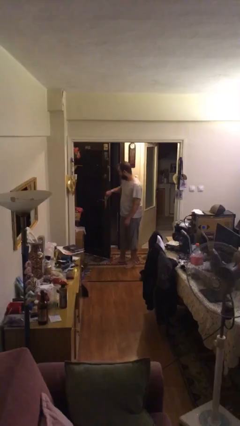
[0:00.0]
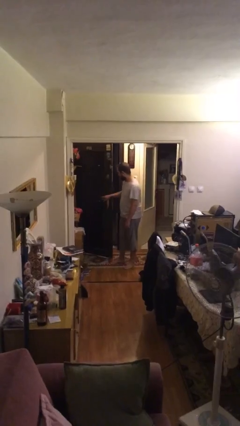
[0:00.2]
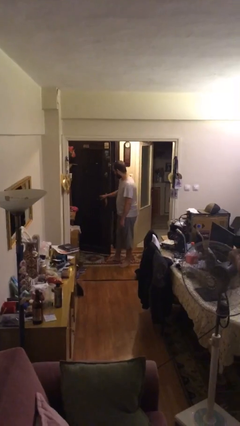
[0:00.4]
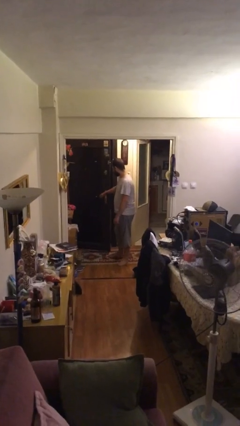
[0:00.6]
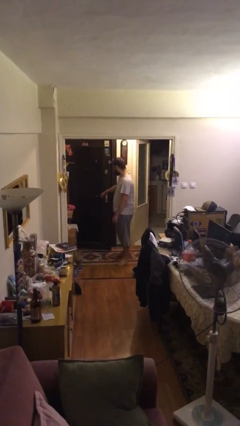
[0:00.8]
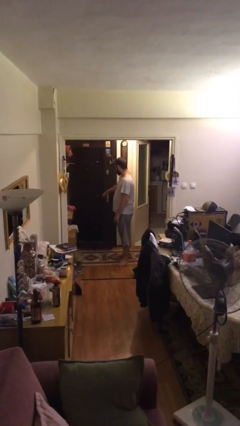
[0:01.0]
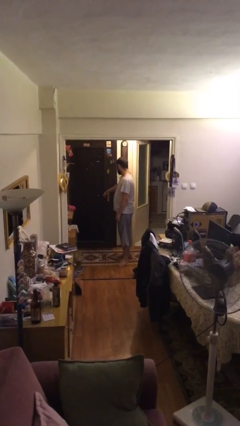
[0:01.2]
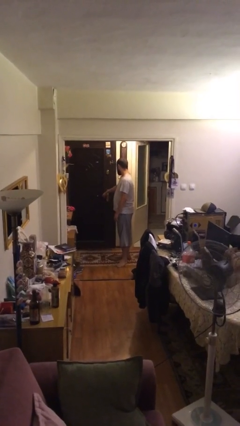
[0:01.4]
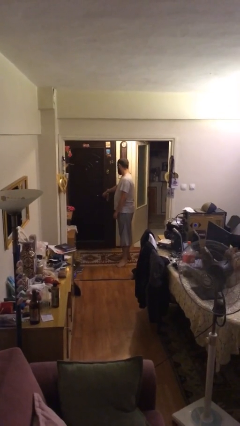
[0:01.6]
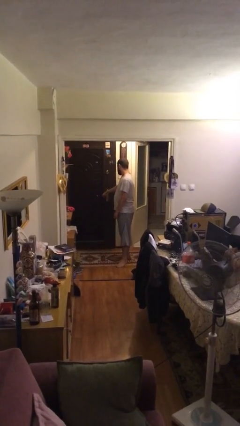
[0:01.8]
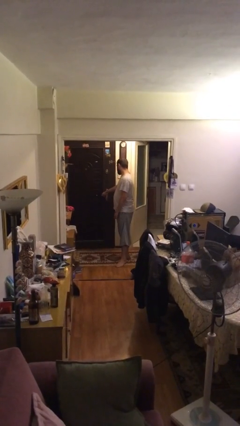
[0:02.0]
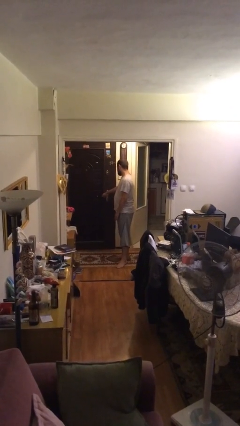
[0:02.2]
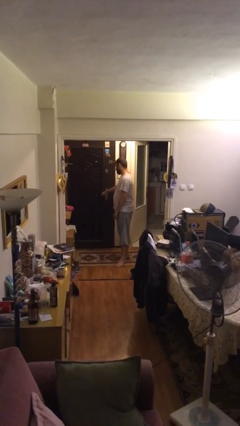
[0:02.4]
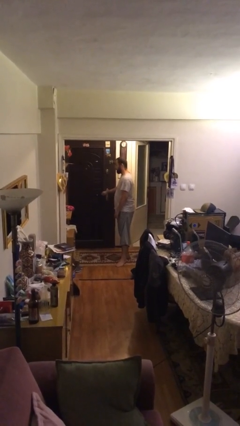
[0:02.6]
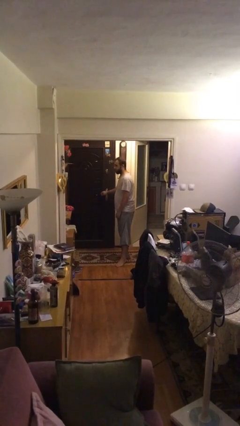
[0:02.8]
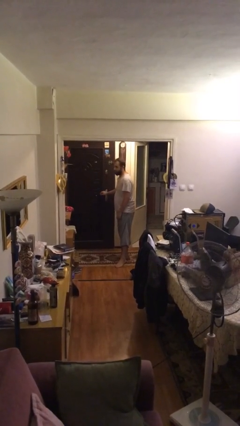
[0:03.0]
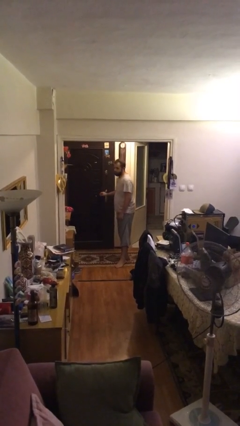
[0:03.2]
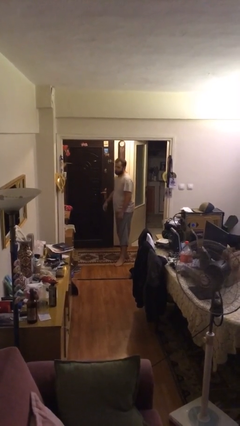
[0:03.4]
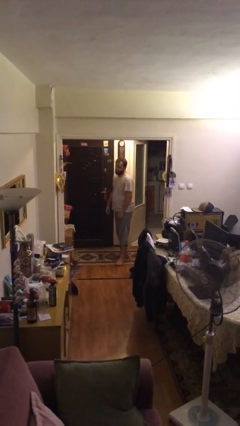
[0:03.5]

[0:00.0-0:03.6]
person closes facility door

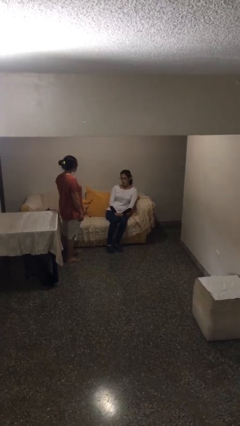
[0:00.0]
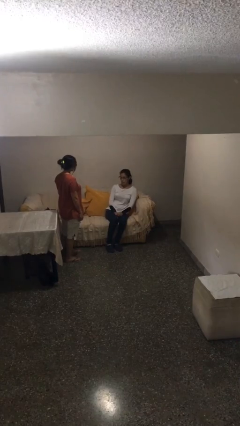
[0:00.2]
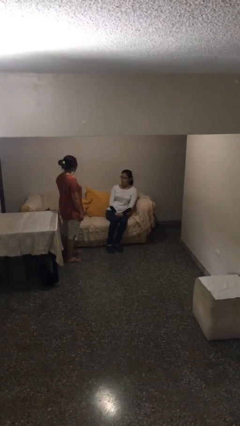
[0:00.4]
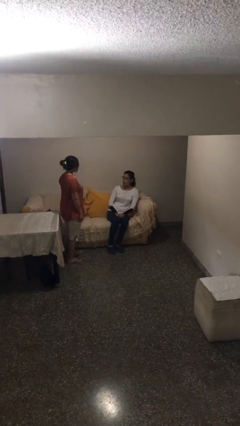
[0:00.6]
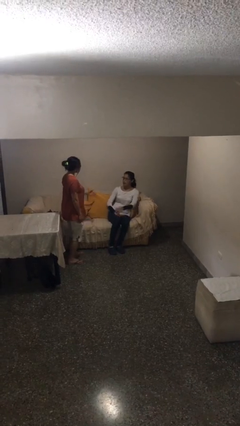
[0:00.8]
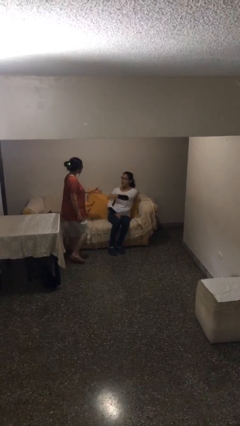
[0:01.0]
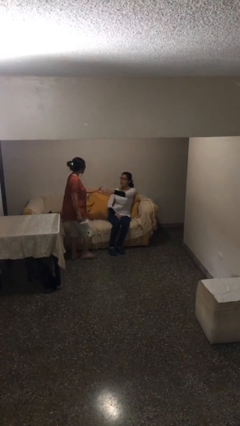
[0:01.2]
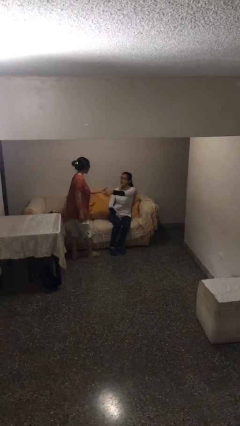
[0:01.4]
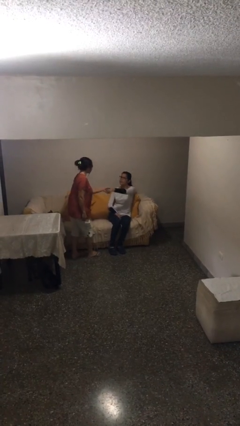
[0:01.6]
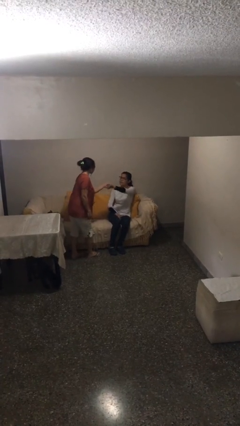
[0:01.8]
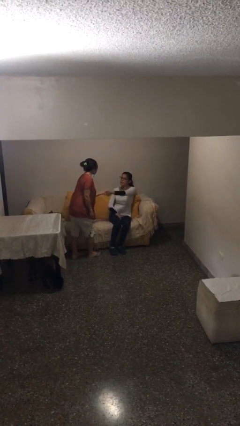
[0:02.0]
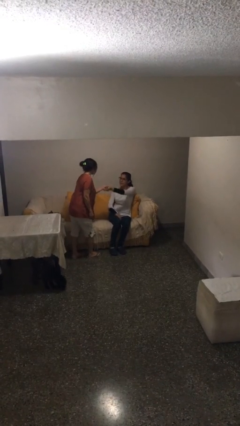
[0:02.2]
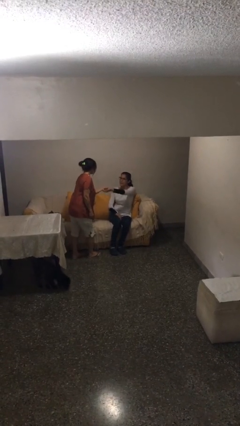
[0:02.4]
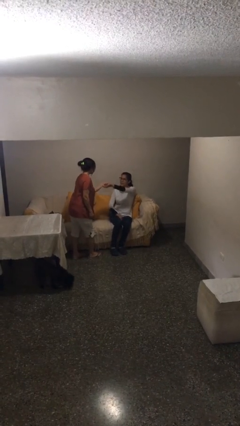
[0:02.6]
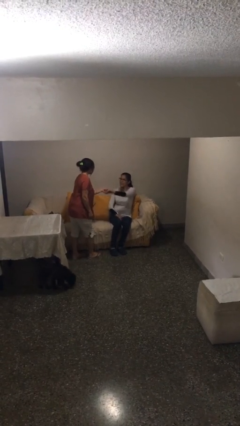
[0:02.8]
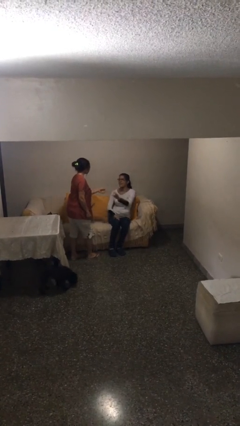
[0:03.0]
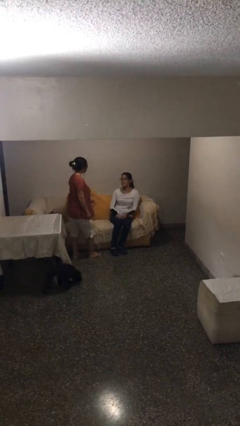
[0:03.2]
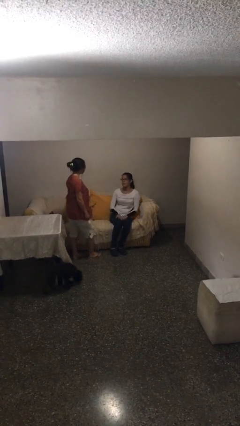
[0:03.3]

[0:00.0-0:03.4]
person shakes hand

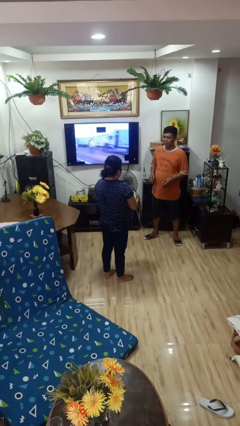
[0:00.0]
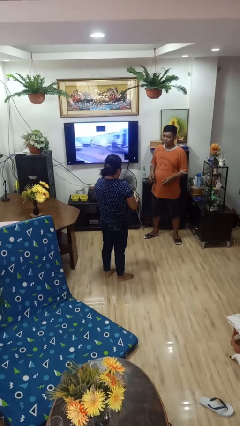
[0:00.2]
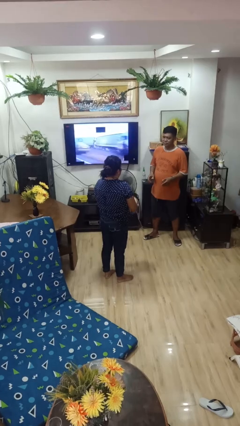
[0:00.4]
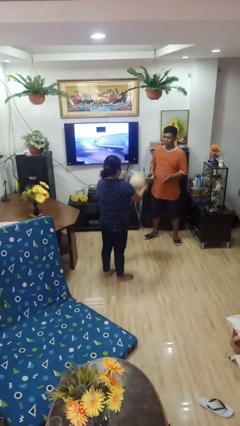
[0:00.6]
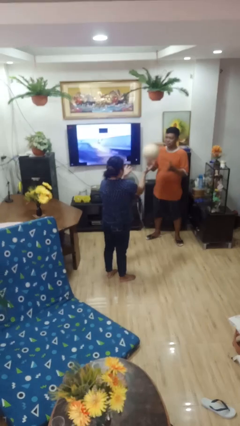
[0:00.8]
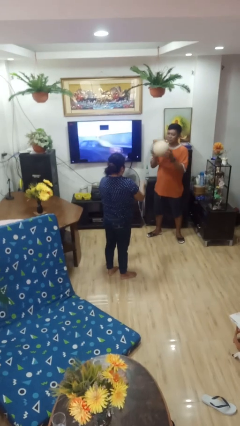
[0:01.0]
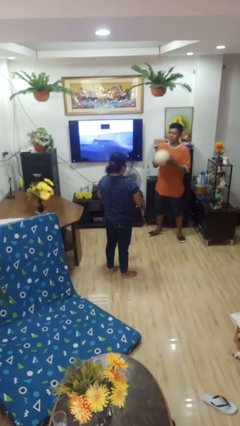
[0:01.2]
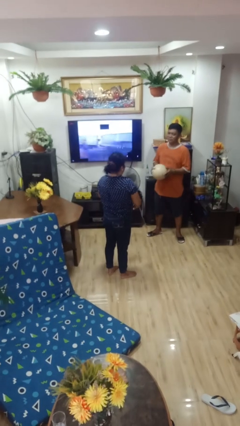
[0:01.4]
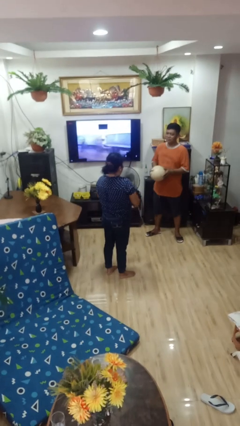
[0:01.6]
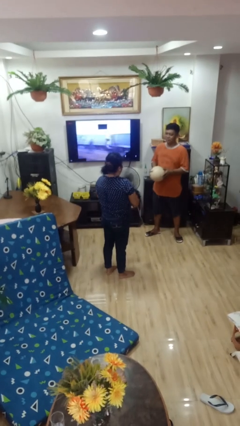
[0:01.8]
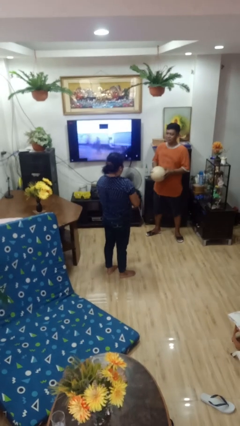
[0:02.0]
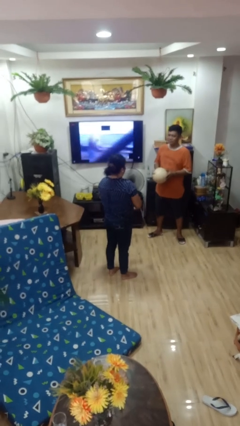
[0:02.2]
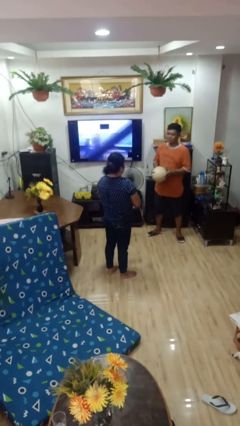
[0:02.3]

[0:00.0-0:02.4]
person throws object to person

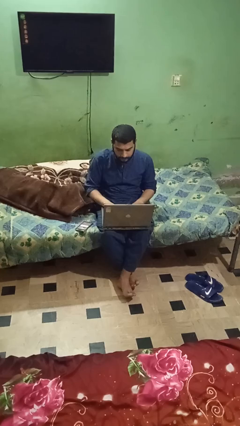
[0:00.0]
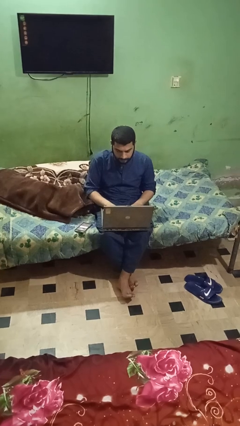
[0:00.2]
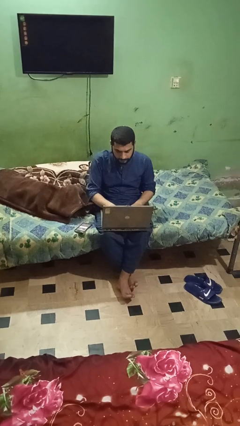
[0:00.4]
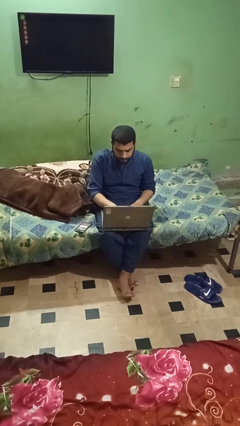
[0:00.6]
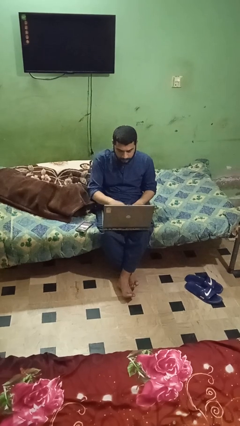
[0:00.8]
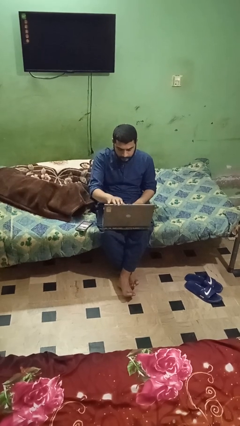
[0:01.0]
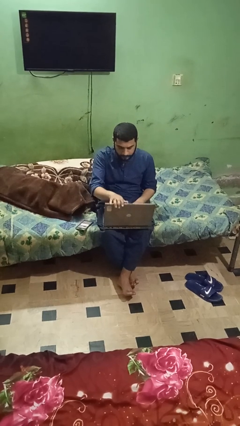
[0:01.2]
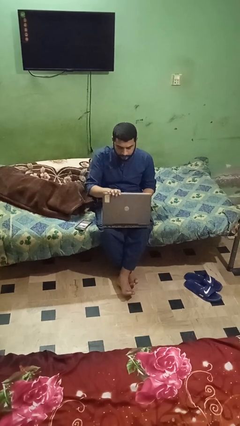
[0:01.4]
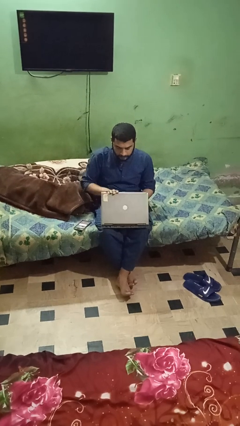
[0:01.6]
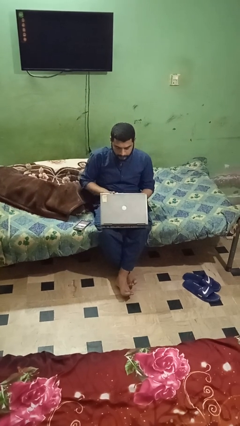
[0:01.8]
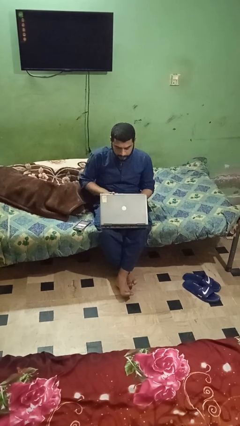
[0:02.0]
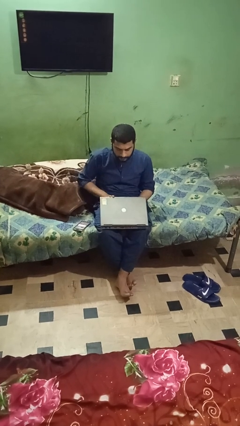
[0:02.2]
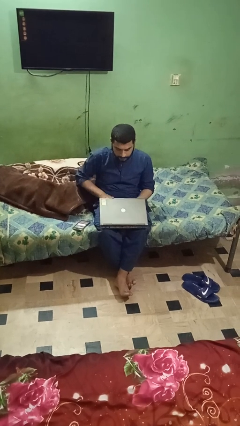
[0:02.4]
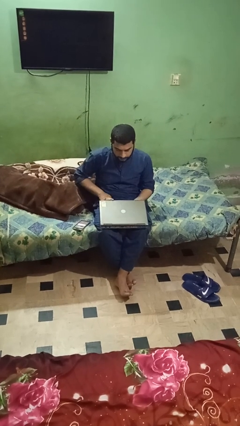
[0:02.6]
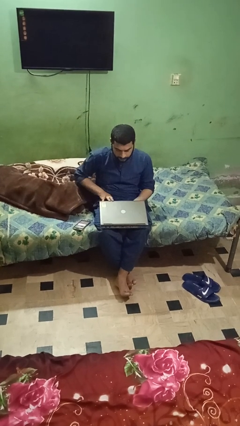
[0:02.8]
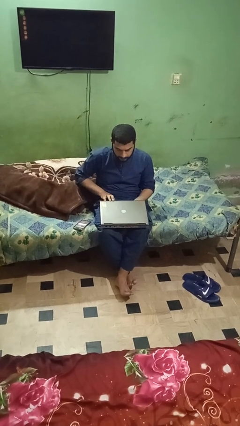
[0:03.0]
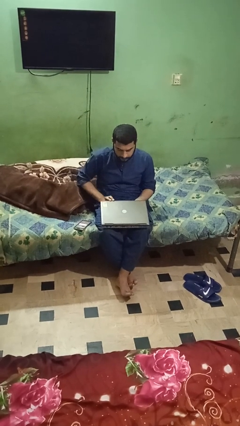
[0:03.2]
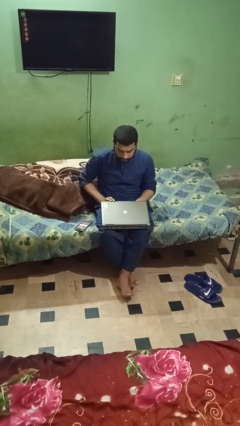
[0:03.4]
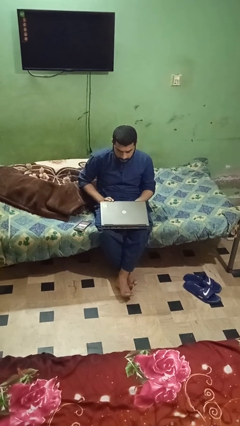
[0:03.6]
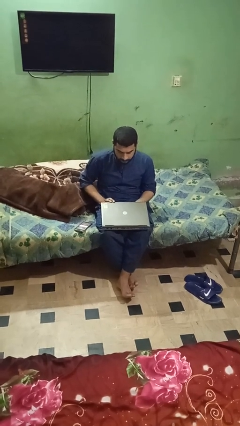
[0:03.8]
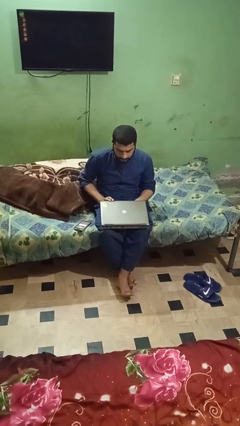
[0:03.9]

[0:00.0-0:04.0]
person closes laptop

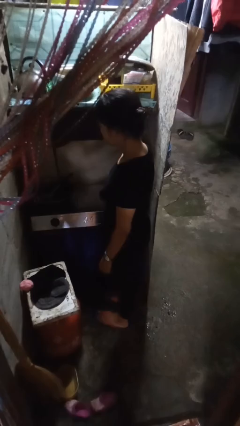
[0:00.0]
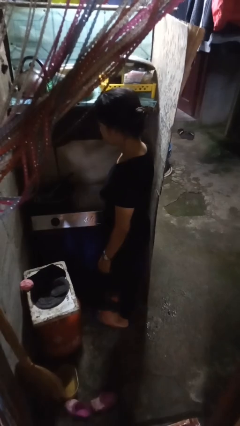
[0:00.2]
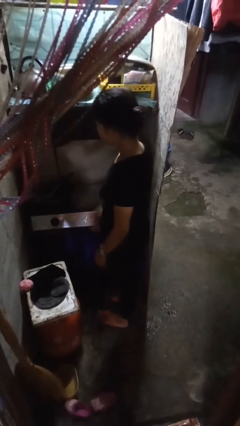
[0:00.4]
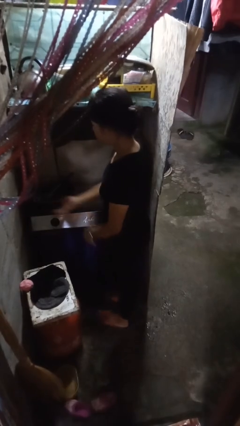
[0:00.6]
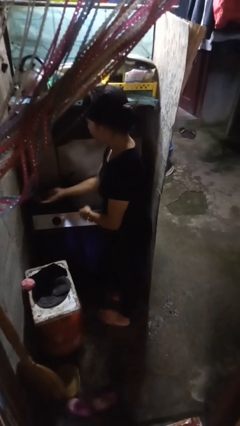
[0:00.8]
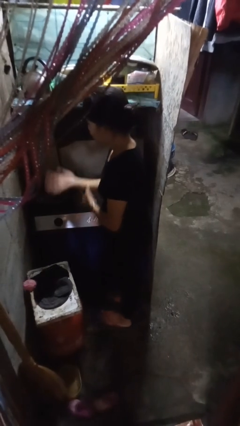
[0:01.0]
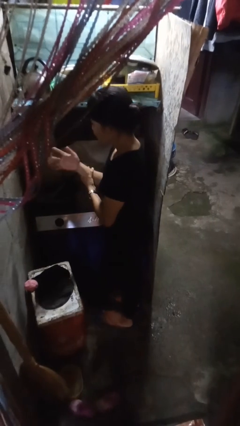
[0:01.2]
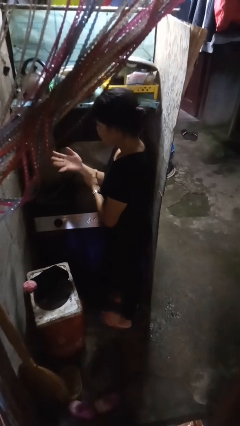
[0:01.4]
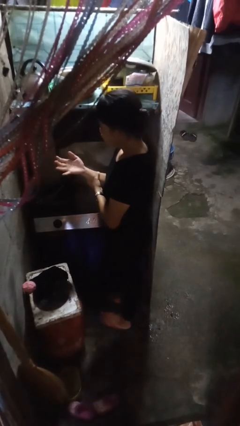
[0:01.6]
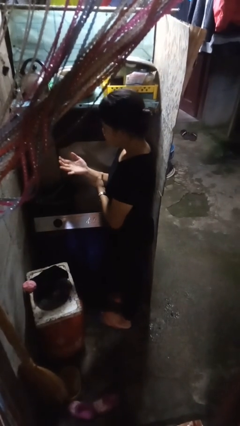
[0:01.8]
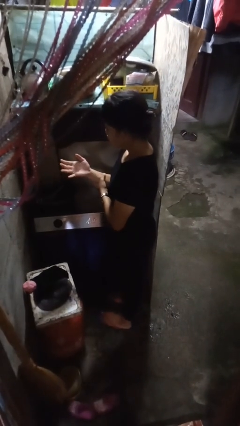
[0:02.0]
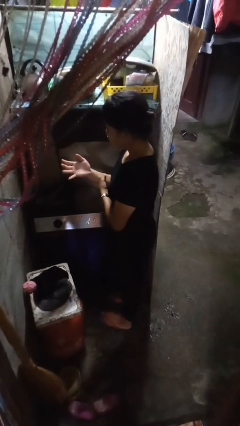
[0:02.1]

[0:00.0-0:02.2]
person burns hand

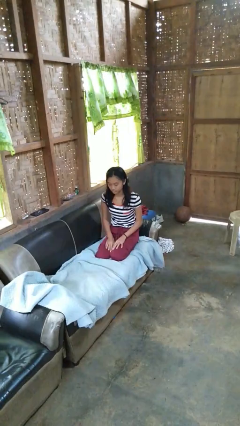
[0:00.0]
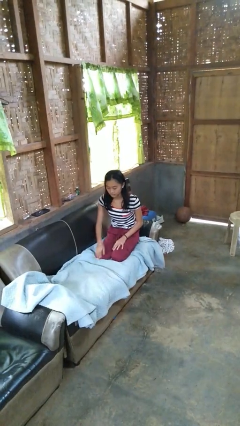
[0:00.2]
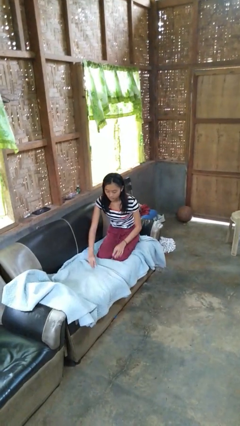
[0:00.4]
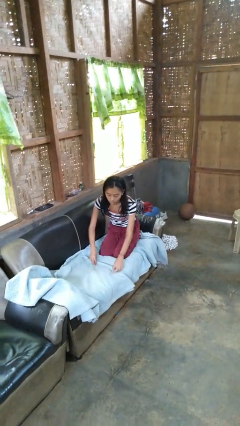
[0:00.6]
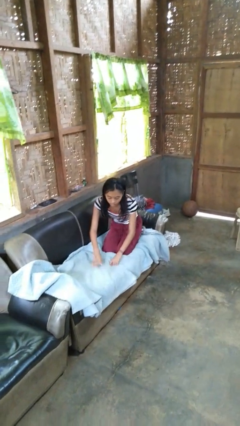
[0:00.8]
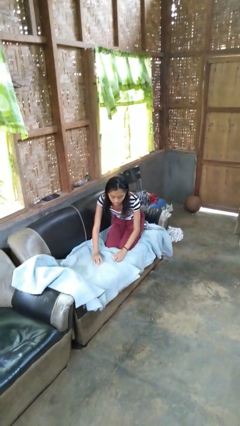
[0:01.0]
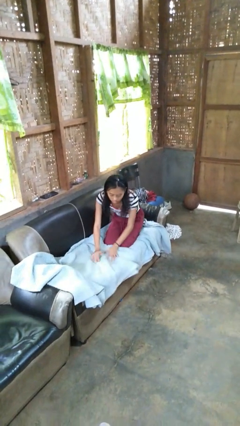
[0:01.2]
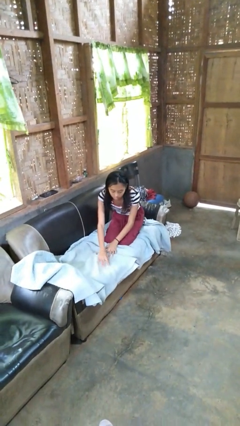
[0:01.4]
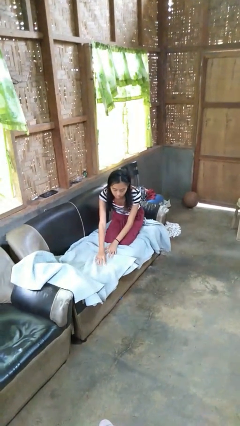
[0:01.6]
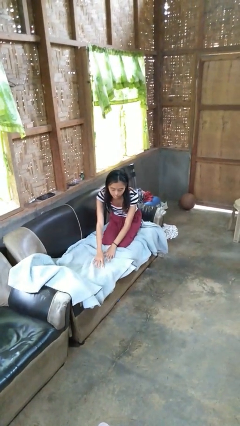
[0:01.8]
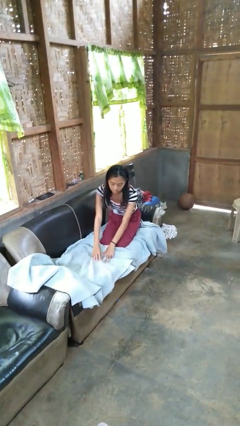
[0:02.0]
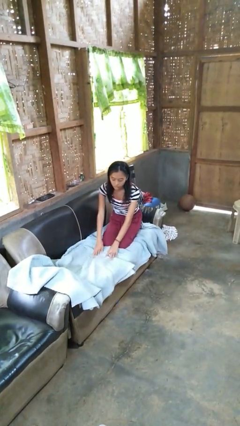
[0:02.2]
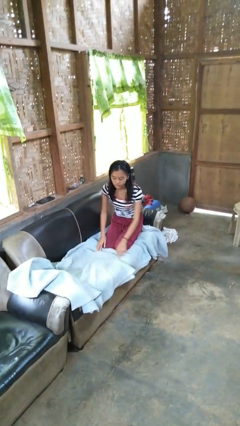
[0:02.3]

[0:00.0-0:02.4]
person searches in couch
